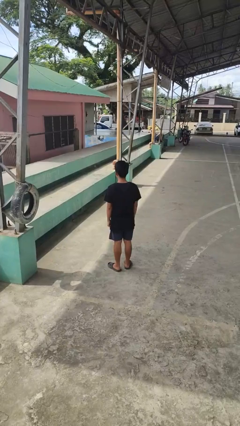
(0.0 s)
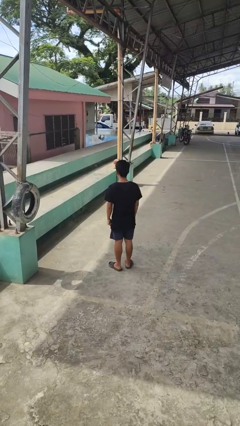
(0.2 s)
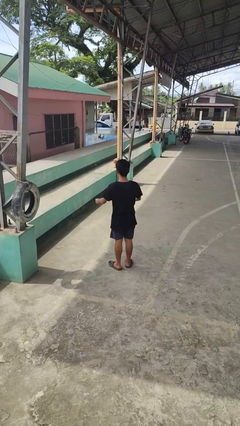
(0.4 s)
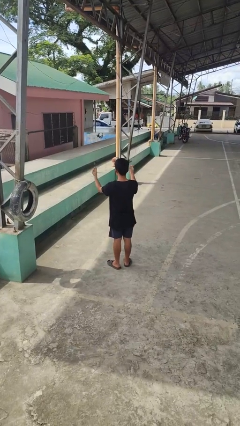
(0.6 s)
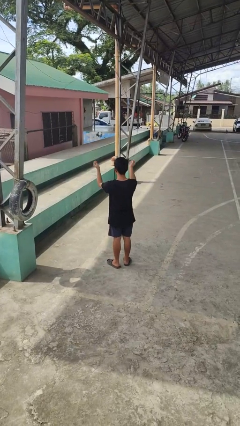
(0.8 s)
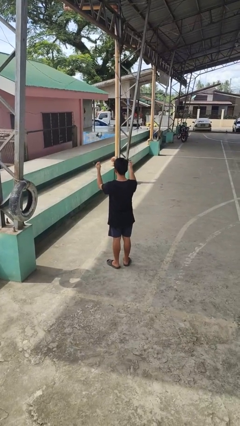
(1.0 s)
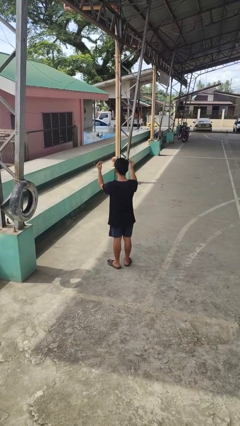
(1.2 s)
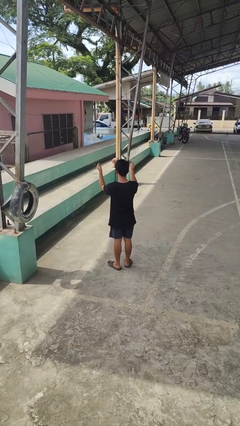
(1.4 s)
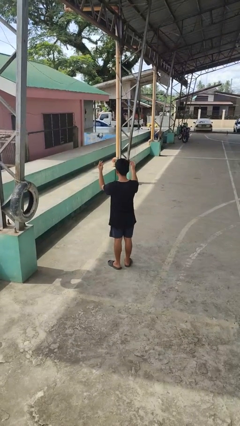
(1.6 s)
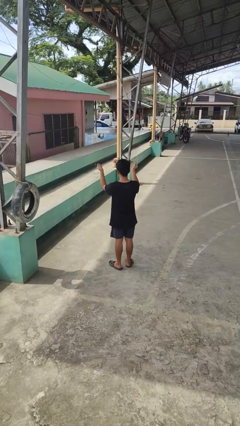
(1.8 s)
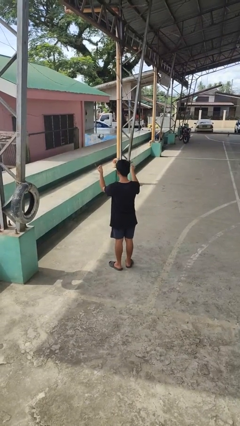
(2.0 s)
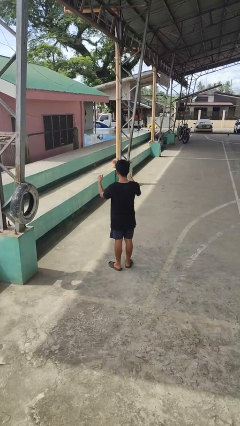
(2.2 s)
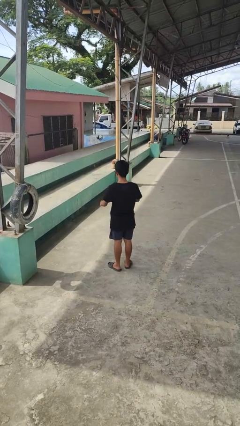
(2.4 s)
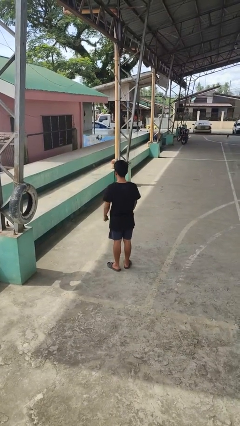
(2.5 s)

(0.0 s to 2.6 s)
person snaps fingers

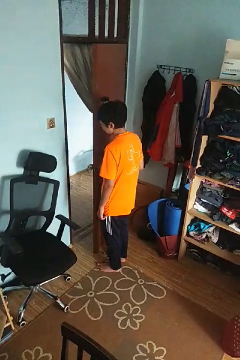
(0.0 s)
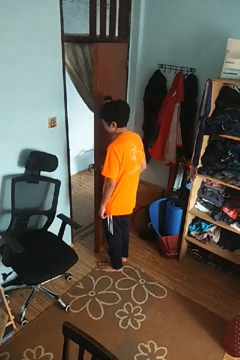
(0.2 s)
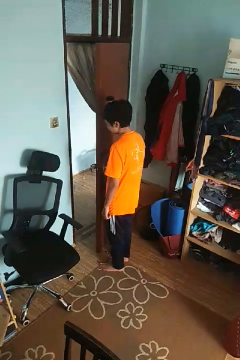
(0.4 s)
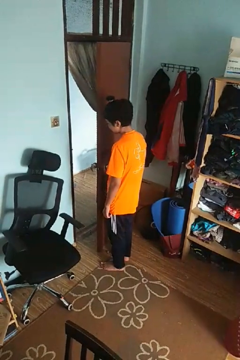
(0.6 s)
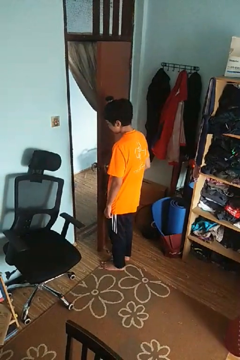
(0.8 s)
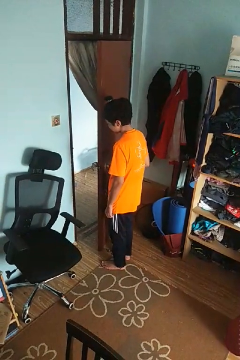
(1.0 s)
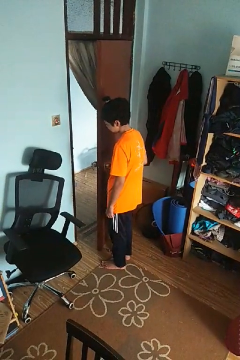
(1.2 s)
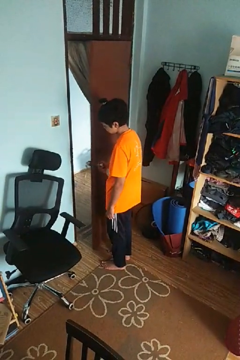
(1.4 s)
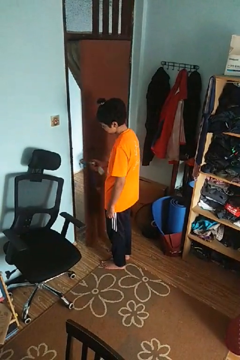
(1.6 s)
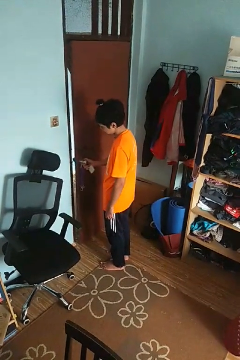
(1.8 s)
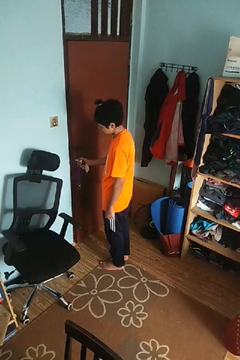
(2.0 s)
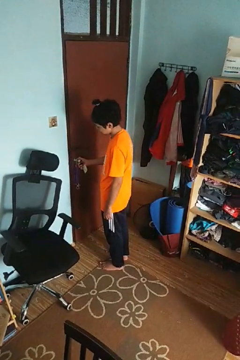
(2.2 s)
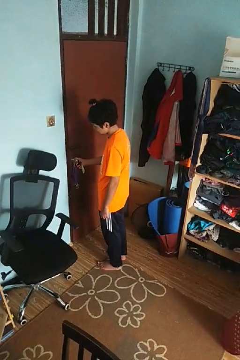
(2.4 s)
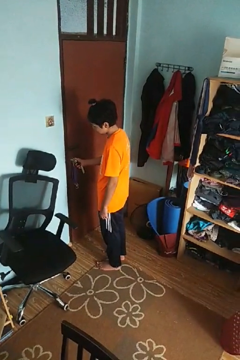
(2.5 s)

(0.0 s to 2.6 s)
person closes facility door

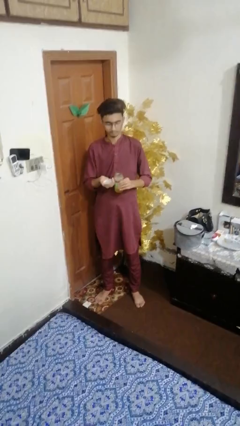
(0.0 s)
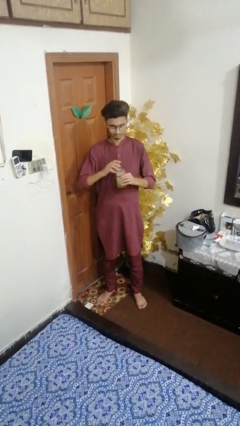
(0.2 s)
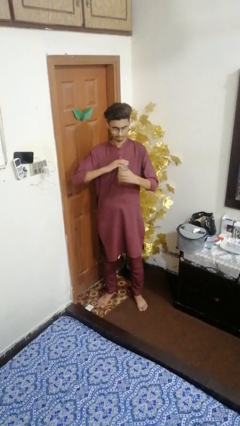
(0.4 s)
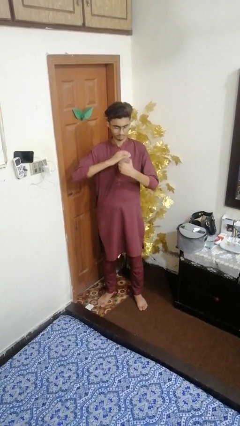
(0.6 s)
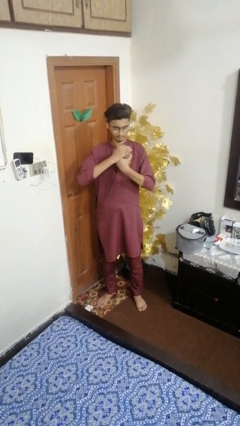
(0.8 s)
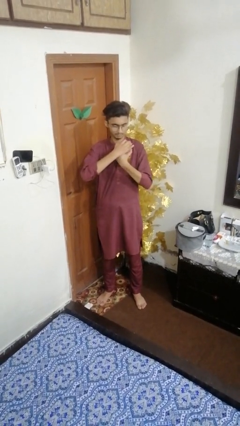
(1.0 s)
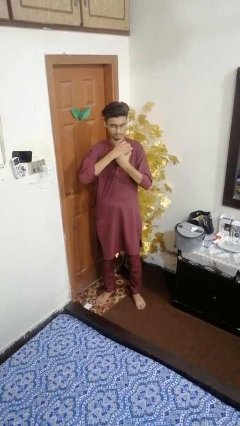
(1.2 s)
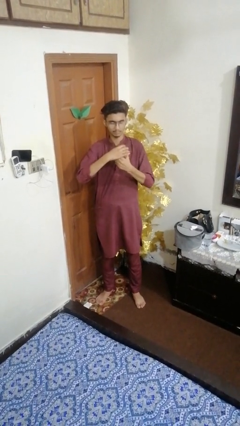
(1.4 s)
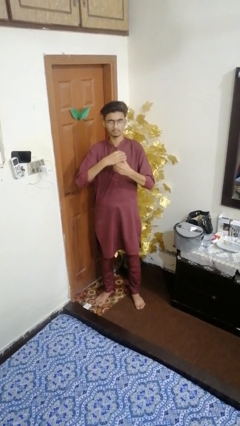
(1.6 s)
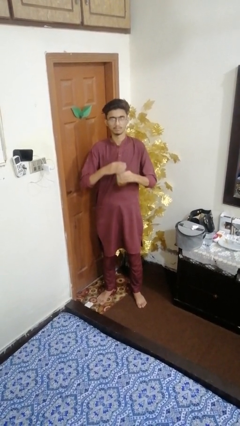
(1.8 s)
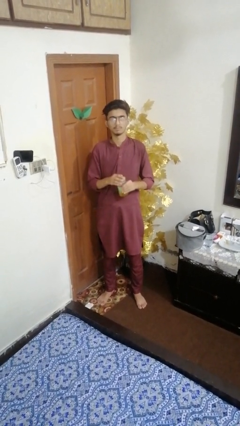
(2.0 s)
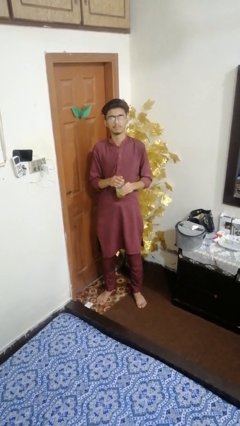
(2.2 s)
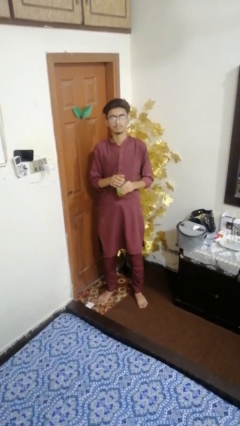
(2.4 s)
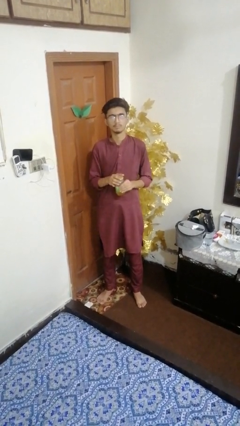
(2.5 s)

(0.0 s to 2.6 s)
person closes jar

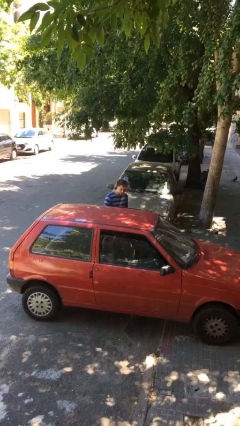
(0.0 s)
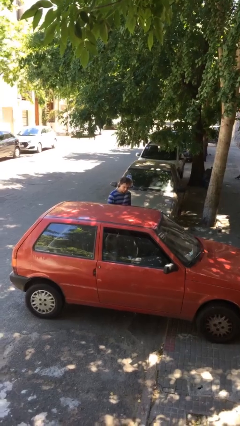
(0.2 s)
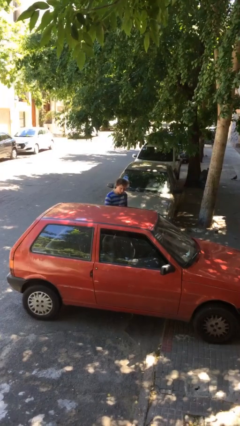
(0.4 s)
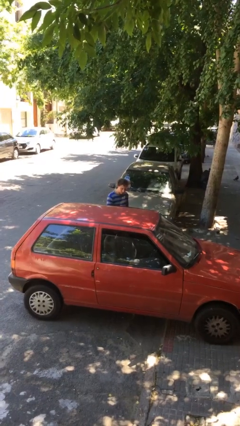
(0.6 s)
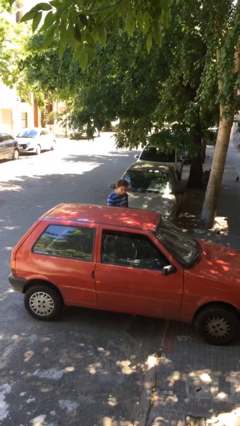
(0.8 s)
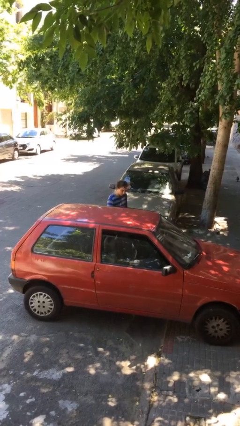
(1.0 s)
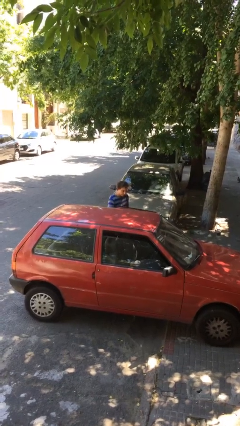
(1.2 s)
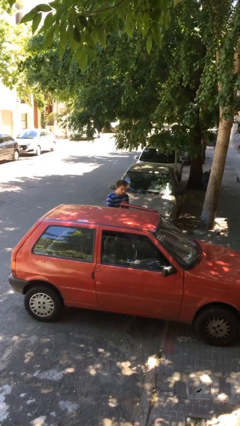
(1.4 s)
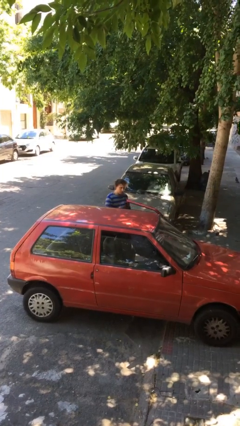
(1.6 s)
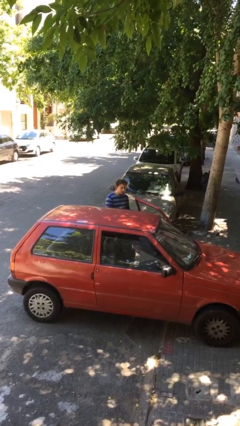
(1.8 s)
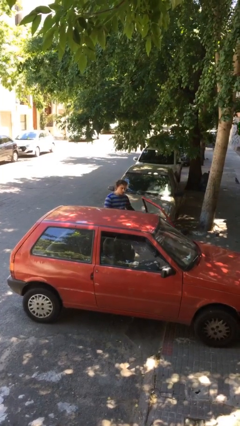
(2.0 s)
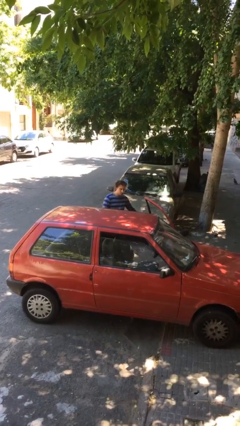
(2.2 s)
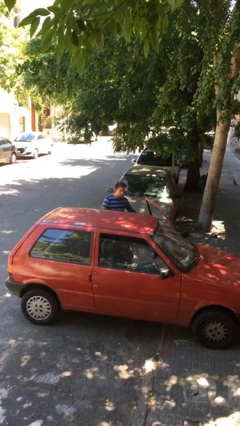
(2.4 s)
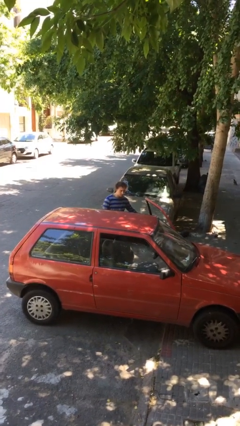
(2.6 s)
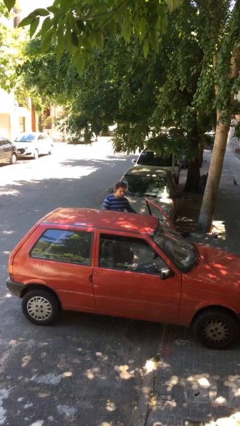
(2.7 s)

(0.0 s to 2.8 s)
person opens car door

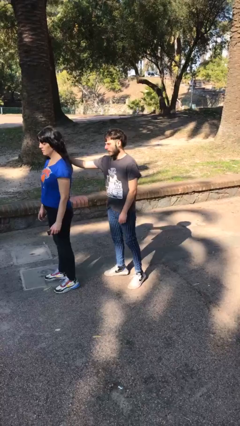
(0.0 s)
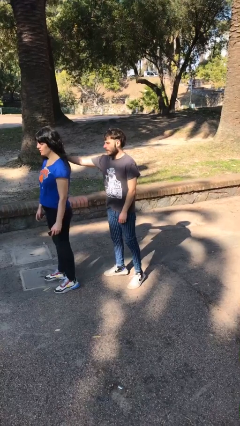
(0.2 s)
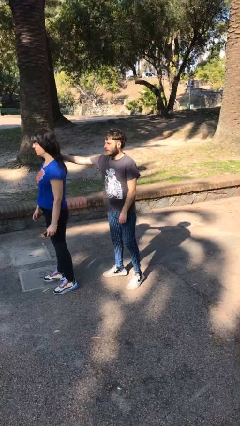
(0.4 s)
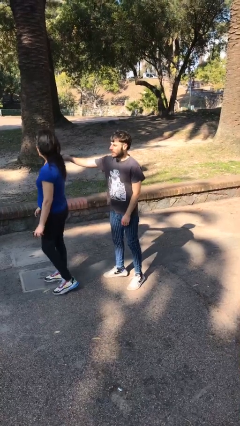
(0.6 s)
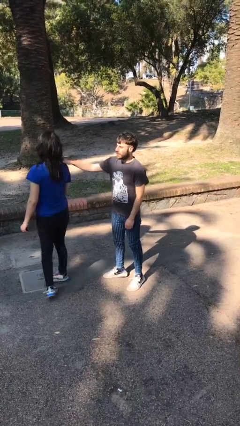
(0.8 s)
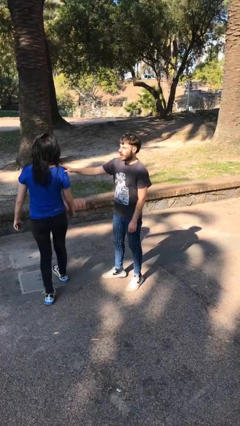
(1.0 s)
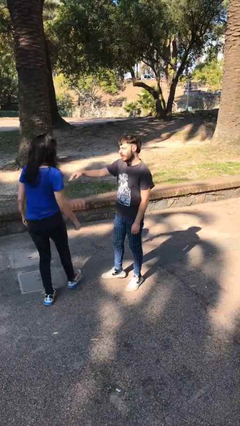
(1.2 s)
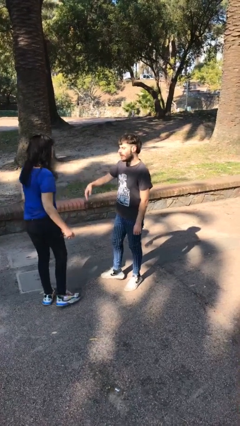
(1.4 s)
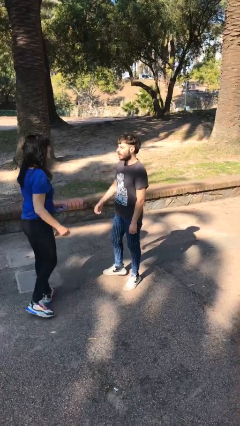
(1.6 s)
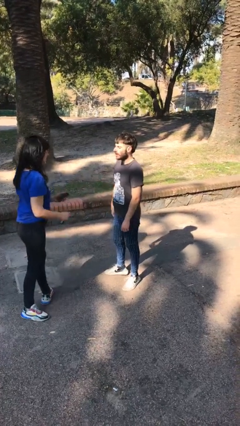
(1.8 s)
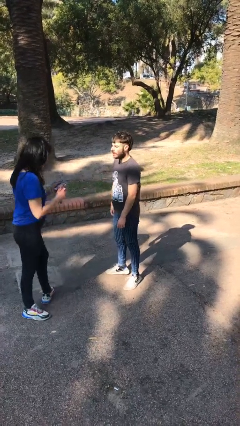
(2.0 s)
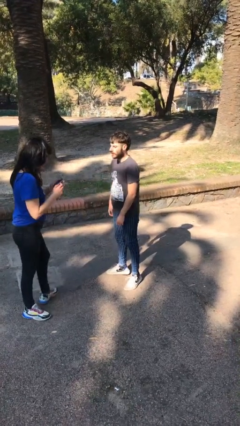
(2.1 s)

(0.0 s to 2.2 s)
person spins person around

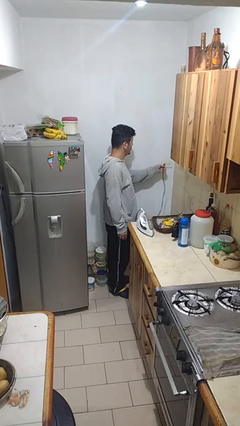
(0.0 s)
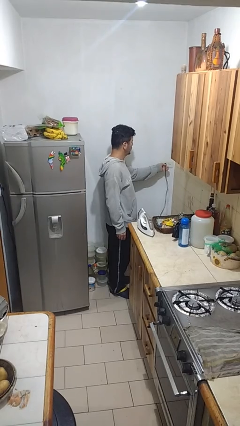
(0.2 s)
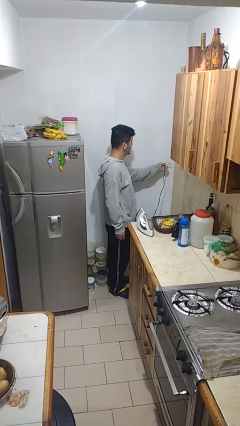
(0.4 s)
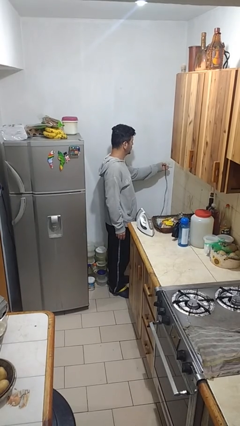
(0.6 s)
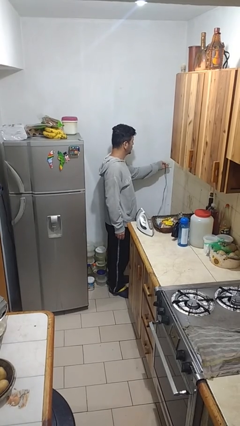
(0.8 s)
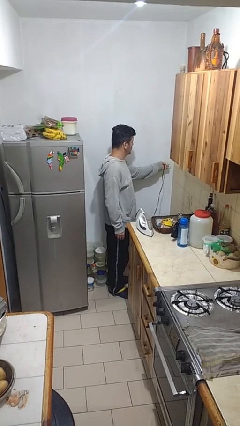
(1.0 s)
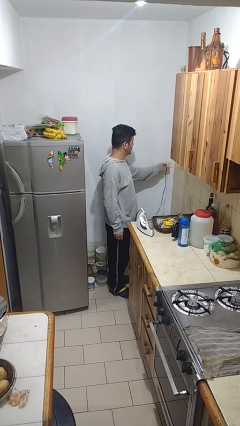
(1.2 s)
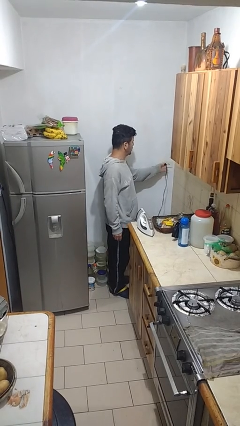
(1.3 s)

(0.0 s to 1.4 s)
person plugs into electrical socket

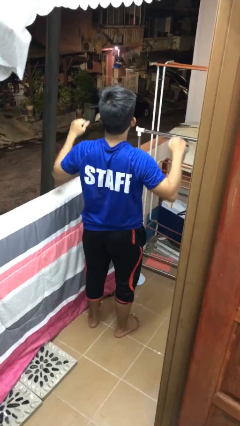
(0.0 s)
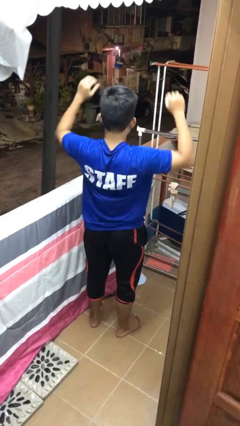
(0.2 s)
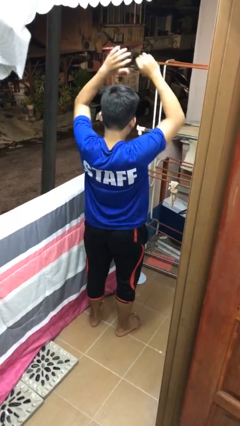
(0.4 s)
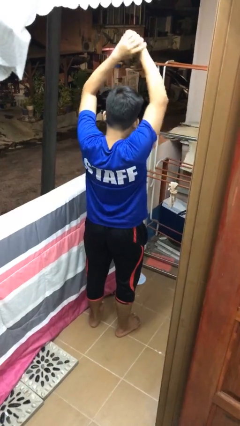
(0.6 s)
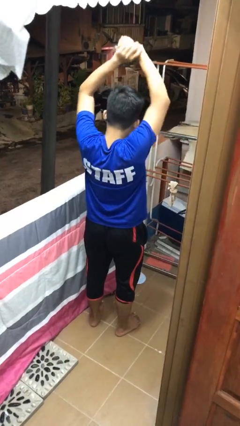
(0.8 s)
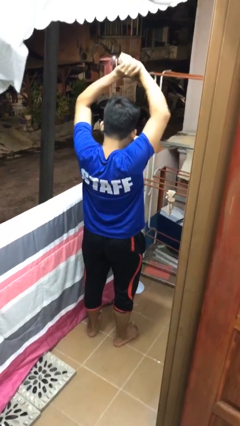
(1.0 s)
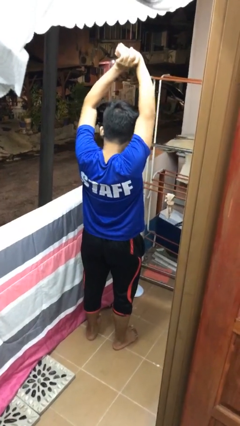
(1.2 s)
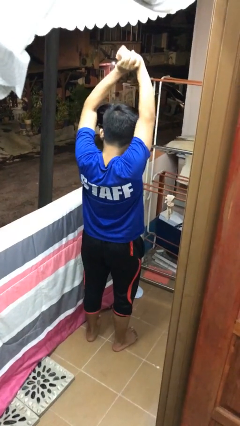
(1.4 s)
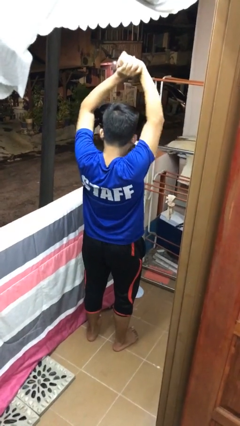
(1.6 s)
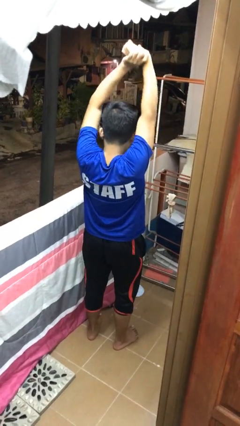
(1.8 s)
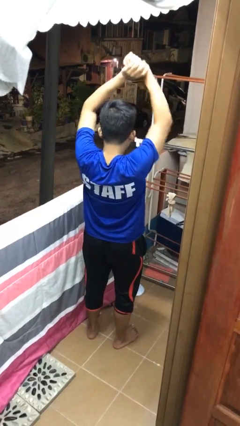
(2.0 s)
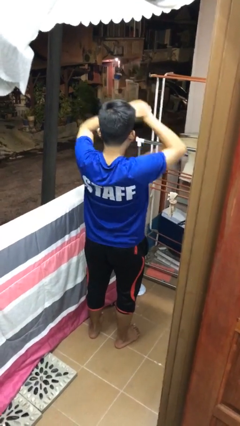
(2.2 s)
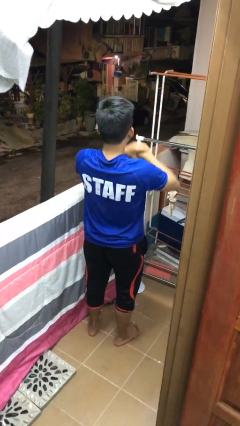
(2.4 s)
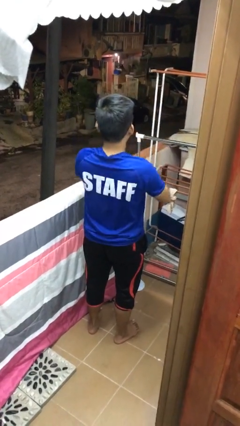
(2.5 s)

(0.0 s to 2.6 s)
person stretches arms over head

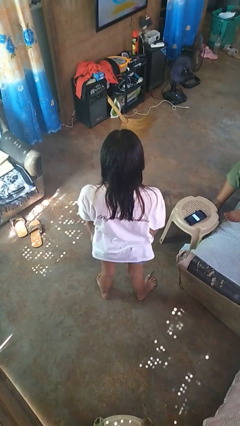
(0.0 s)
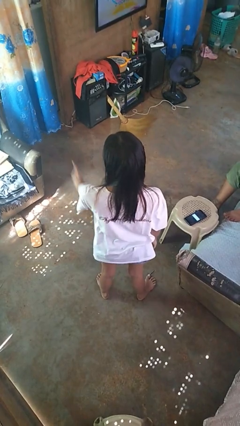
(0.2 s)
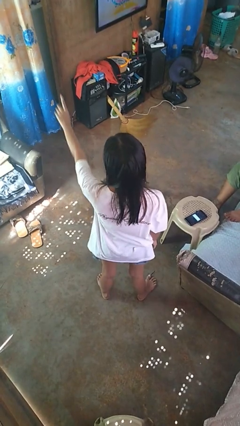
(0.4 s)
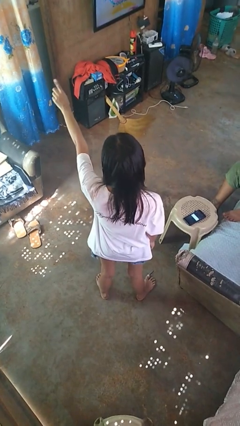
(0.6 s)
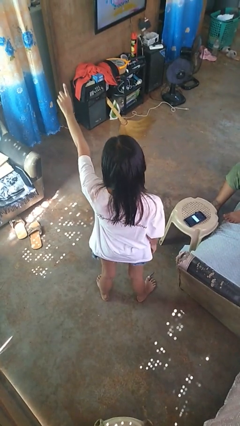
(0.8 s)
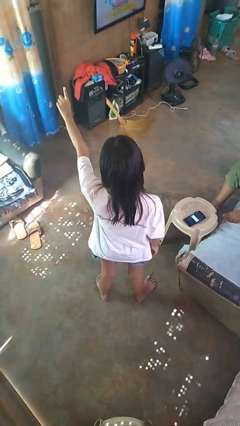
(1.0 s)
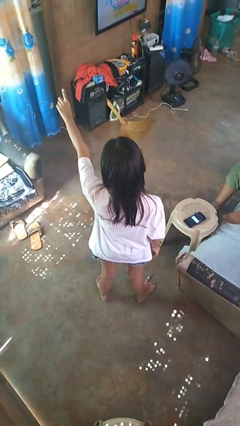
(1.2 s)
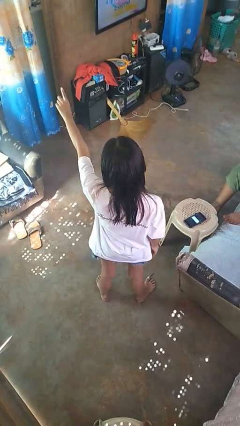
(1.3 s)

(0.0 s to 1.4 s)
person gestures number three
